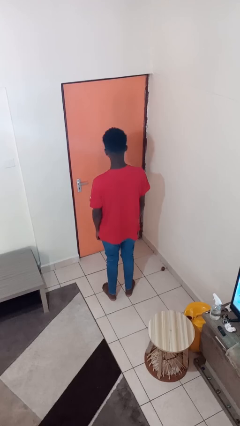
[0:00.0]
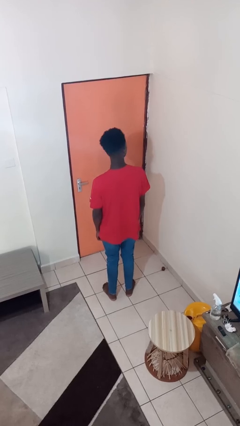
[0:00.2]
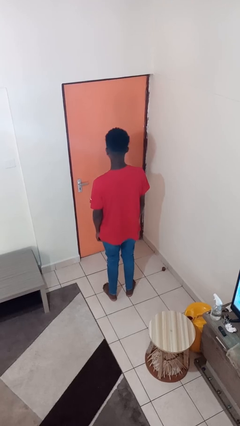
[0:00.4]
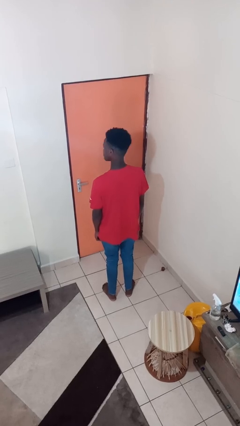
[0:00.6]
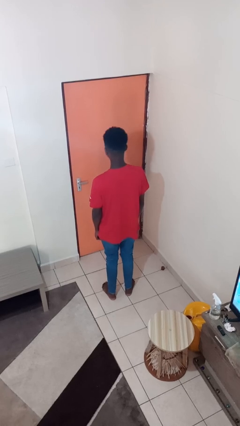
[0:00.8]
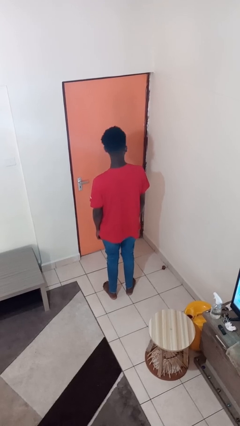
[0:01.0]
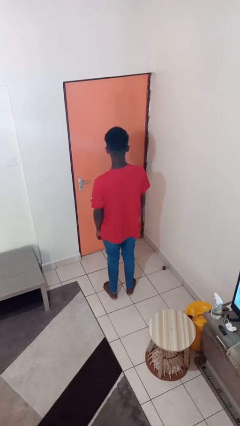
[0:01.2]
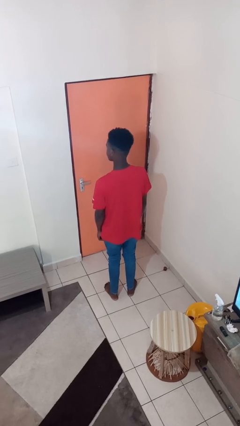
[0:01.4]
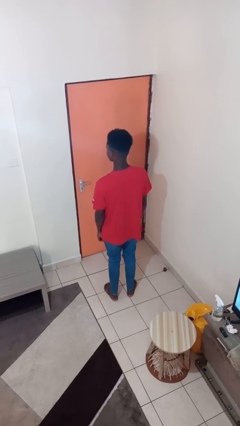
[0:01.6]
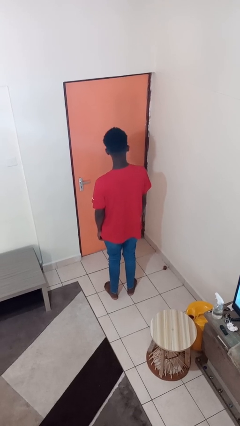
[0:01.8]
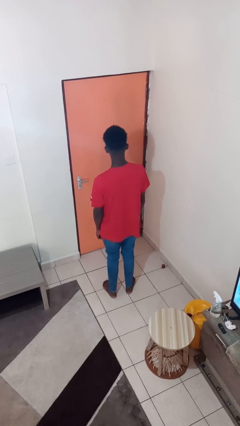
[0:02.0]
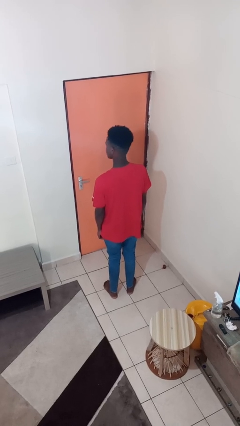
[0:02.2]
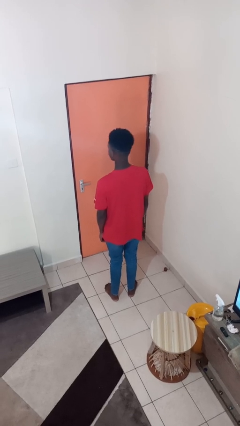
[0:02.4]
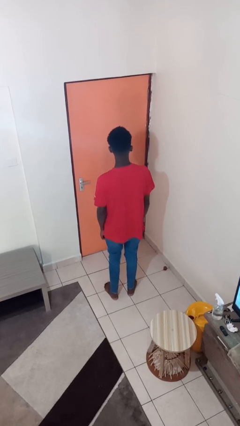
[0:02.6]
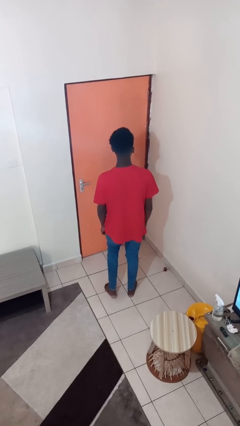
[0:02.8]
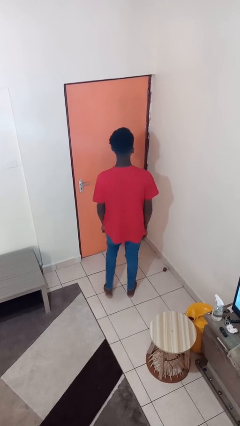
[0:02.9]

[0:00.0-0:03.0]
person shakes head

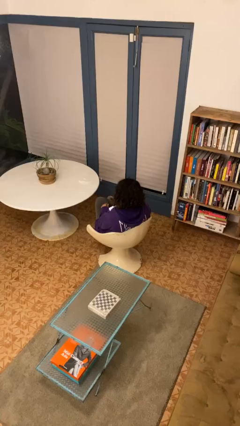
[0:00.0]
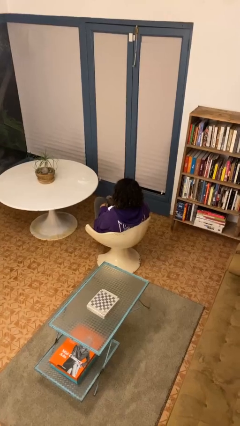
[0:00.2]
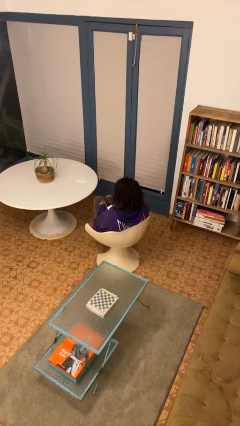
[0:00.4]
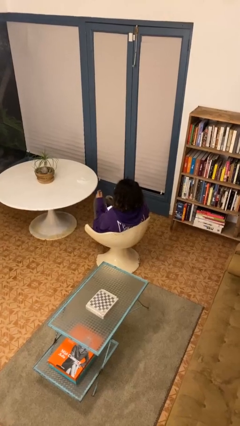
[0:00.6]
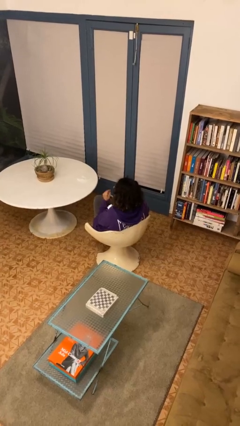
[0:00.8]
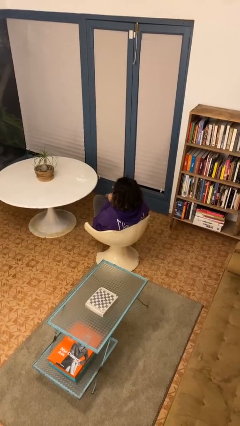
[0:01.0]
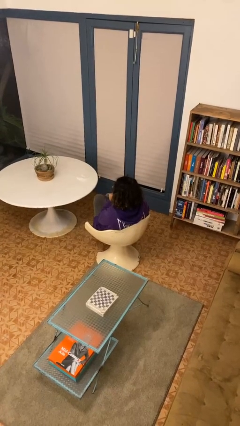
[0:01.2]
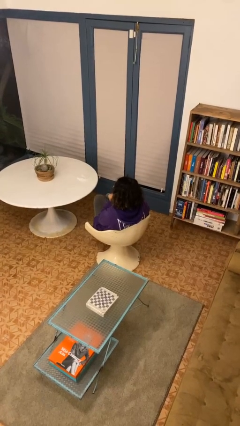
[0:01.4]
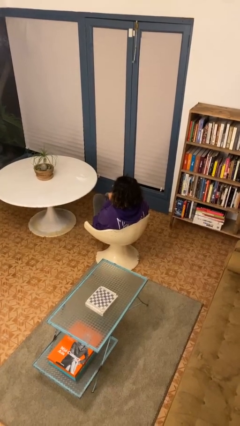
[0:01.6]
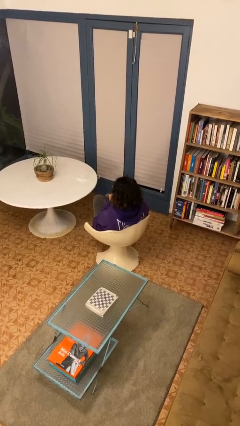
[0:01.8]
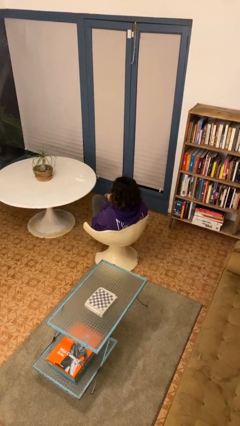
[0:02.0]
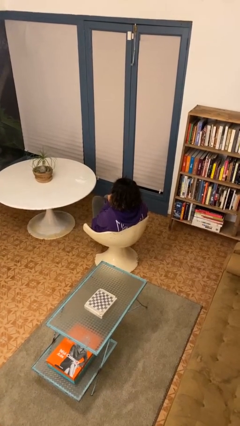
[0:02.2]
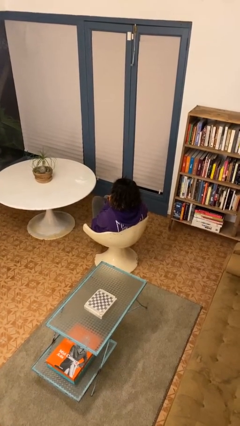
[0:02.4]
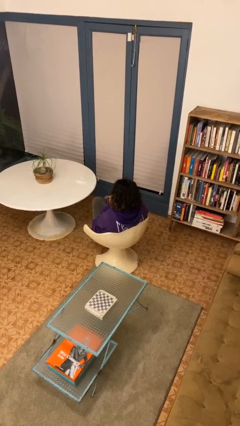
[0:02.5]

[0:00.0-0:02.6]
person strokes chin

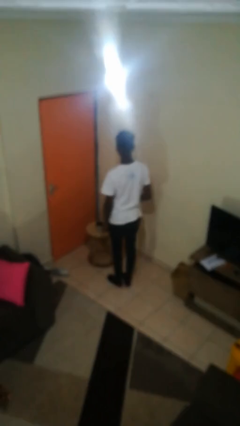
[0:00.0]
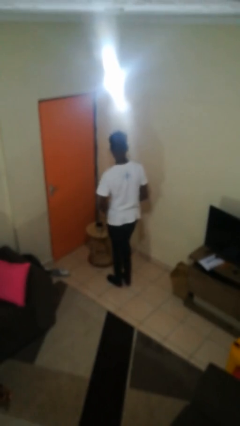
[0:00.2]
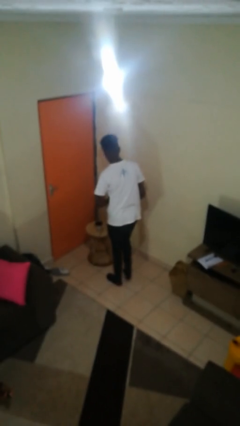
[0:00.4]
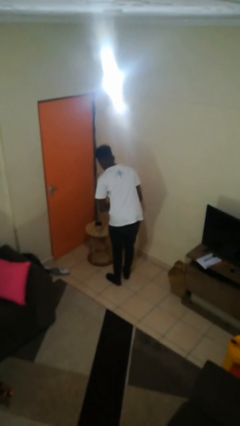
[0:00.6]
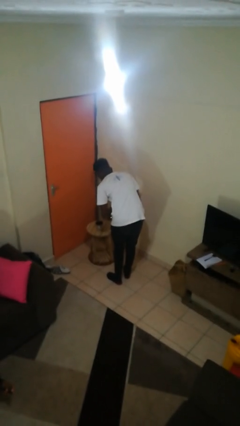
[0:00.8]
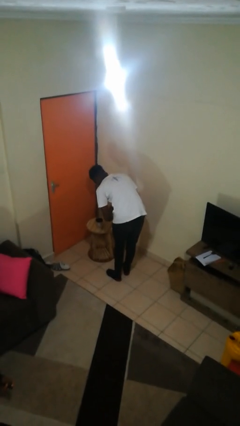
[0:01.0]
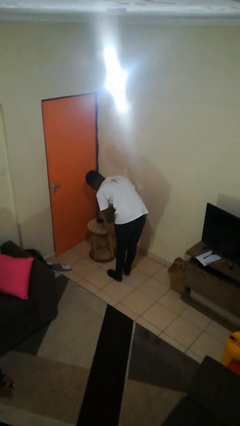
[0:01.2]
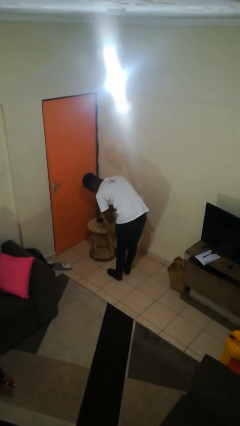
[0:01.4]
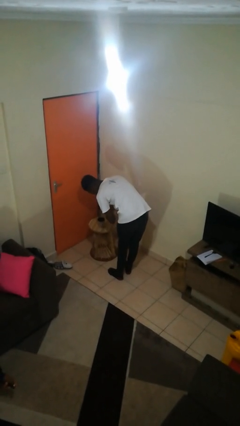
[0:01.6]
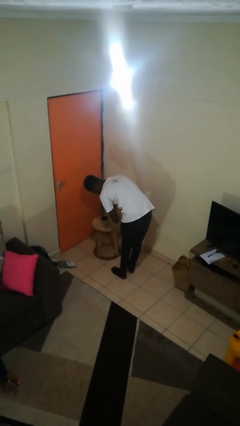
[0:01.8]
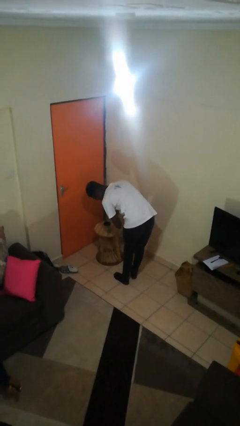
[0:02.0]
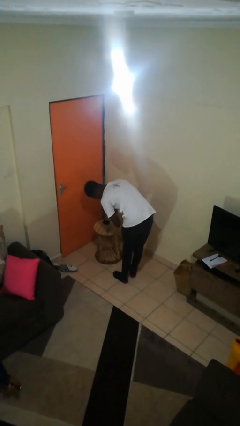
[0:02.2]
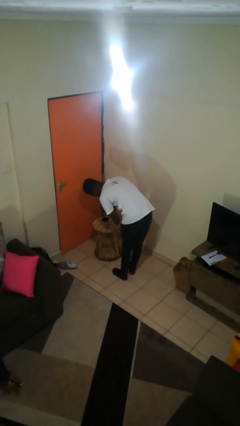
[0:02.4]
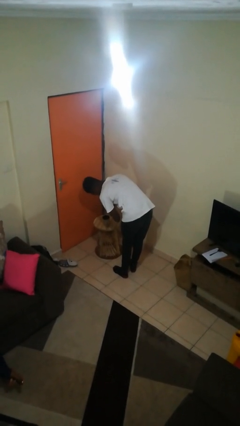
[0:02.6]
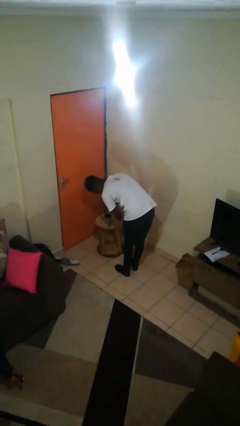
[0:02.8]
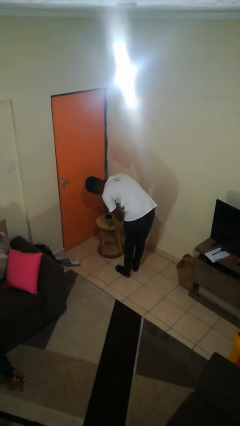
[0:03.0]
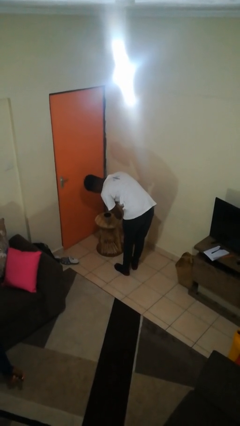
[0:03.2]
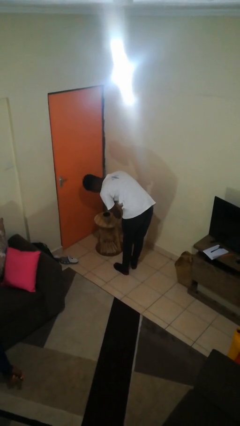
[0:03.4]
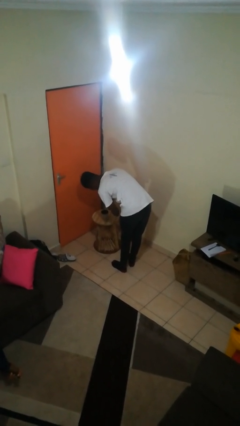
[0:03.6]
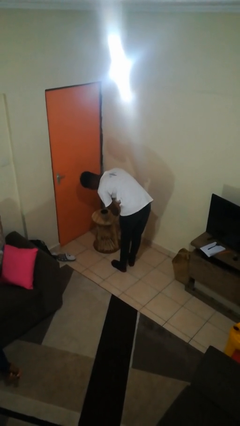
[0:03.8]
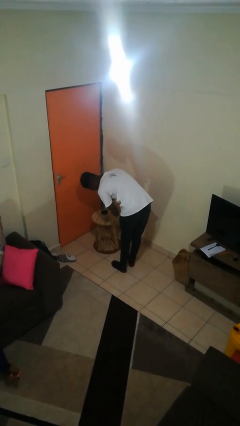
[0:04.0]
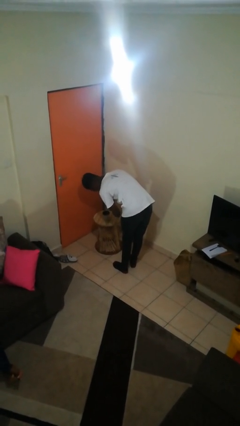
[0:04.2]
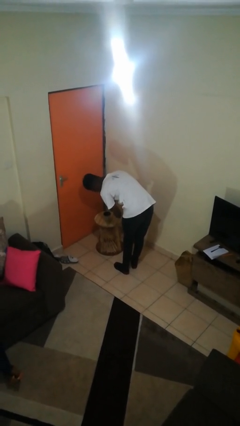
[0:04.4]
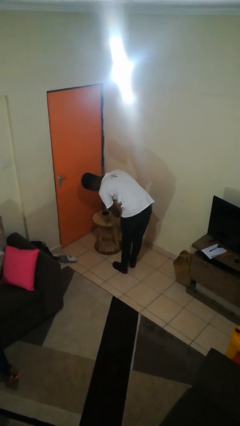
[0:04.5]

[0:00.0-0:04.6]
person pours coffee into mug

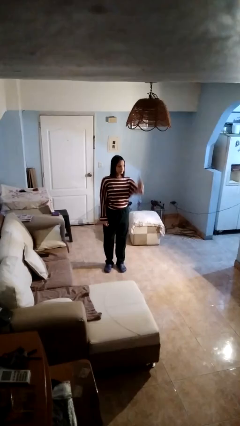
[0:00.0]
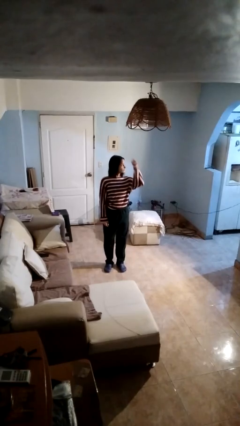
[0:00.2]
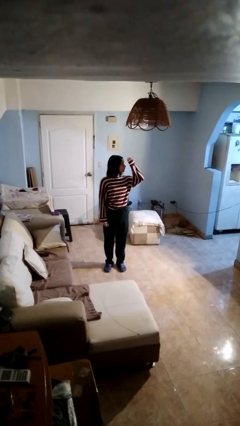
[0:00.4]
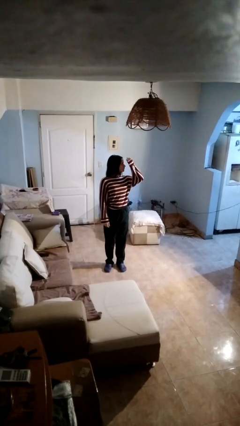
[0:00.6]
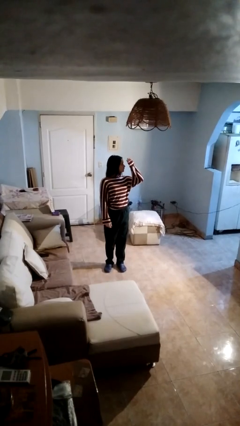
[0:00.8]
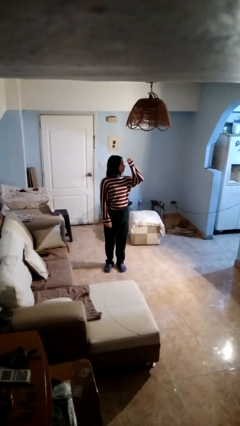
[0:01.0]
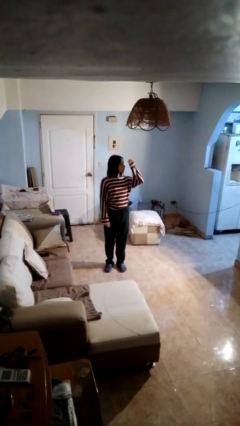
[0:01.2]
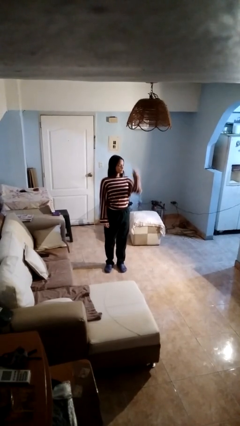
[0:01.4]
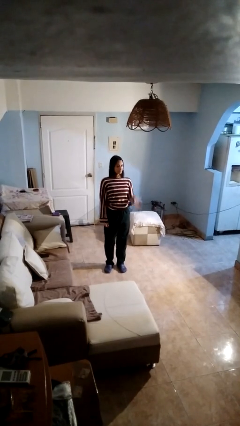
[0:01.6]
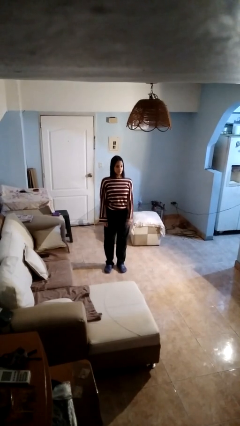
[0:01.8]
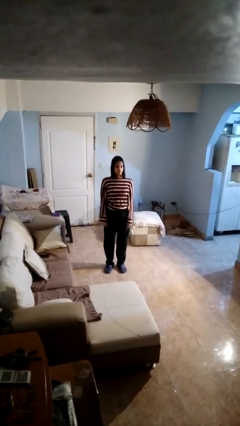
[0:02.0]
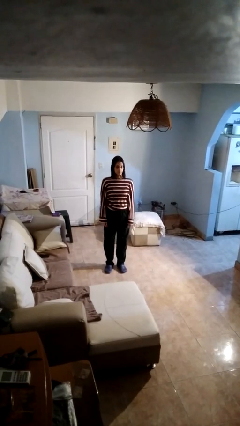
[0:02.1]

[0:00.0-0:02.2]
person gestures behind me

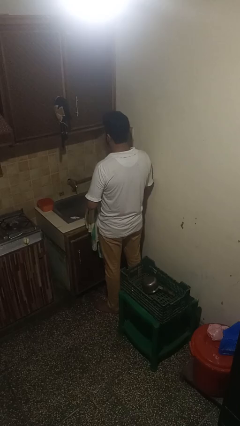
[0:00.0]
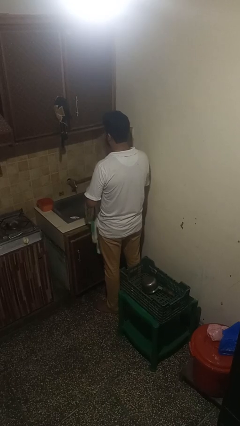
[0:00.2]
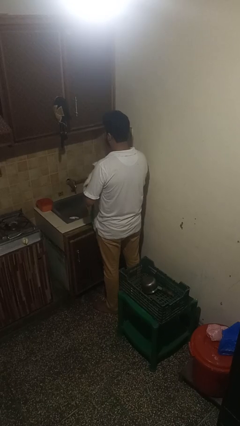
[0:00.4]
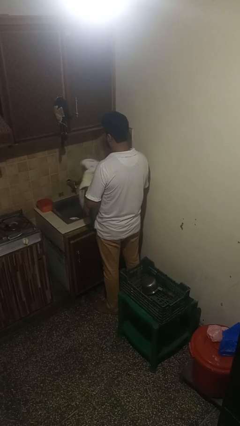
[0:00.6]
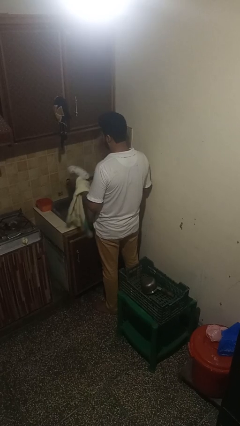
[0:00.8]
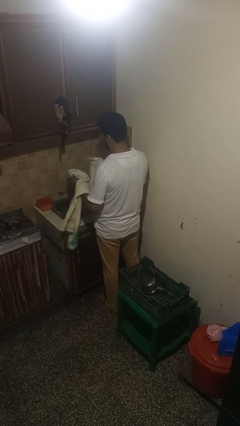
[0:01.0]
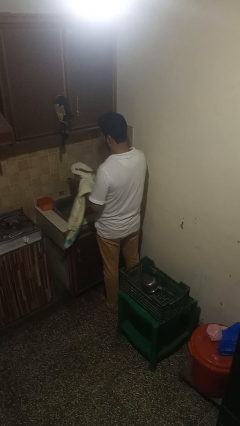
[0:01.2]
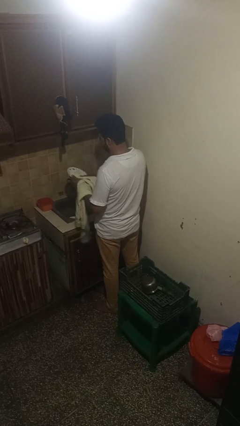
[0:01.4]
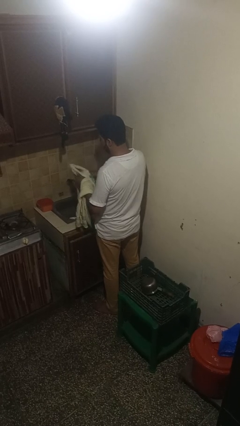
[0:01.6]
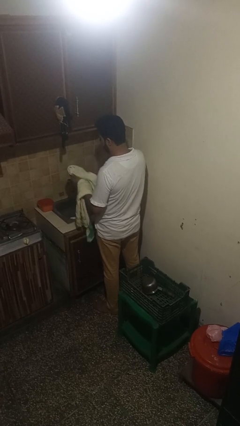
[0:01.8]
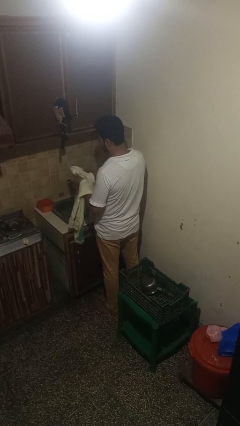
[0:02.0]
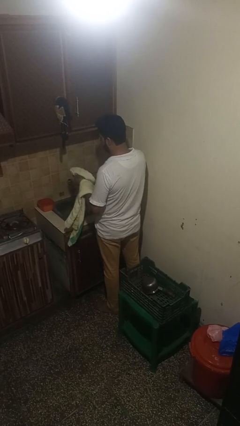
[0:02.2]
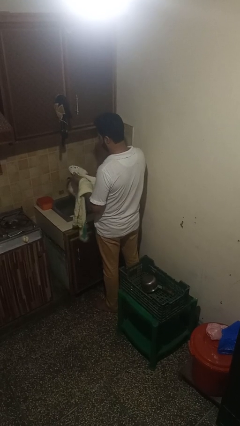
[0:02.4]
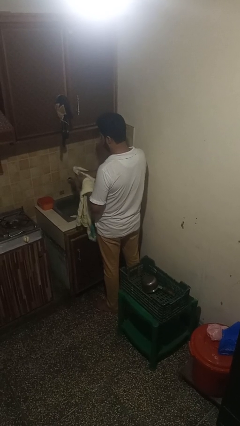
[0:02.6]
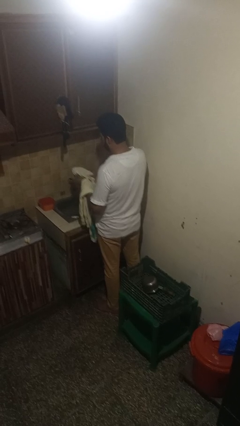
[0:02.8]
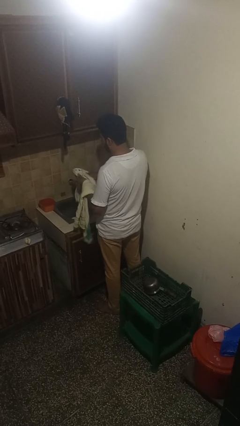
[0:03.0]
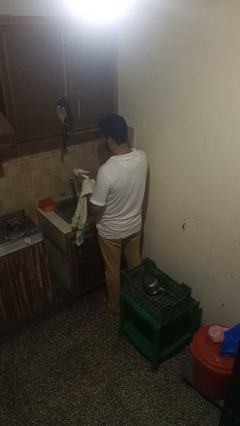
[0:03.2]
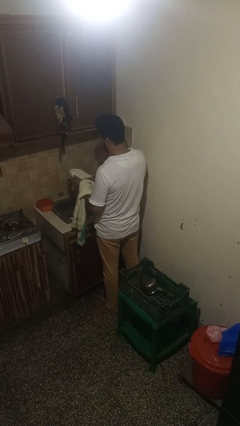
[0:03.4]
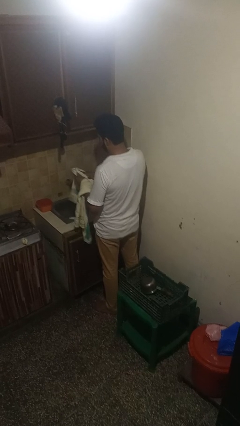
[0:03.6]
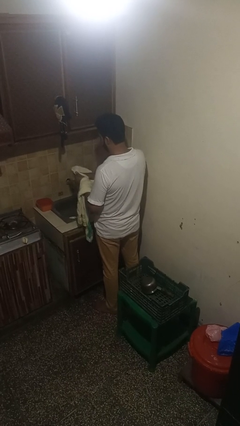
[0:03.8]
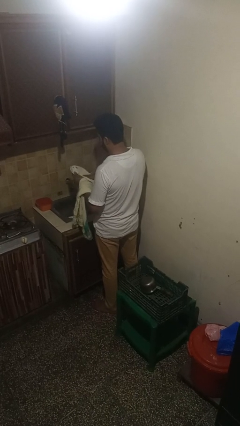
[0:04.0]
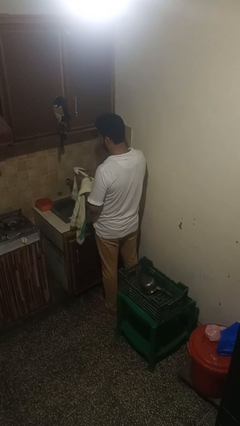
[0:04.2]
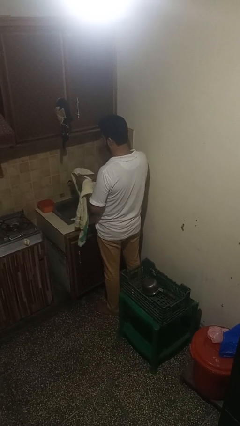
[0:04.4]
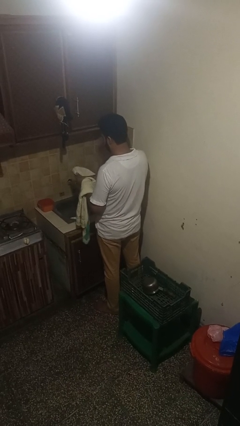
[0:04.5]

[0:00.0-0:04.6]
person dries dish

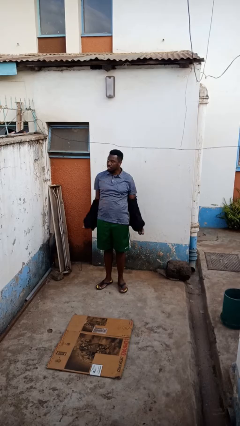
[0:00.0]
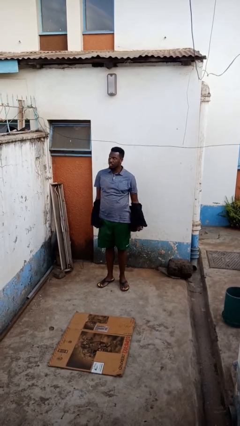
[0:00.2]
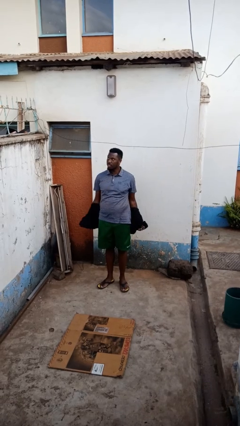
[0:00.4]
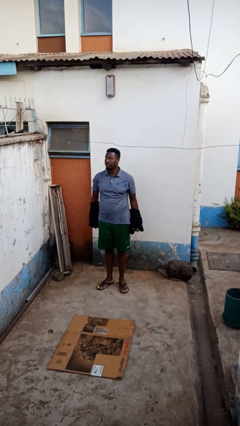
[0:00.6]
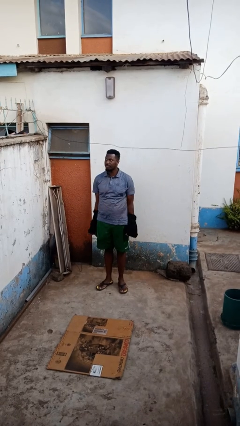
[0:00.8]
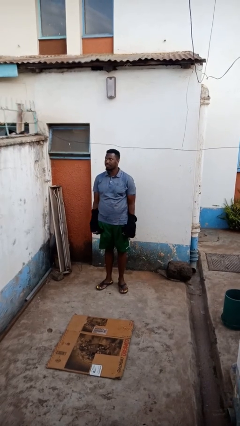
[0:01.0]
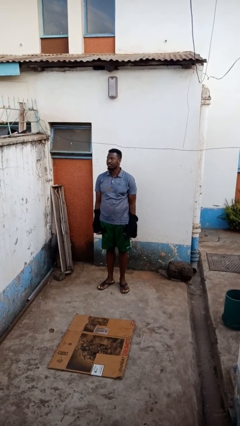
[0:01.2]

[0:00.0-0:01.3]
person takes off jacket
